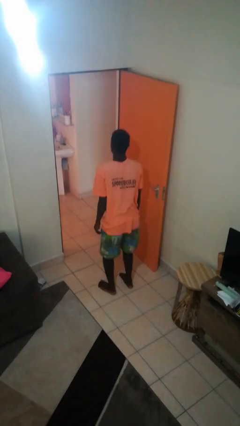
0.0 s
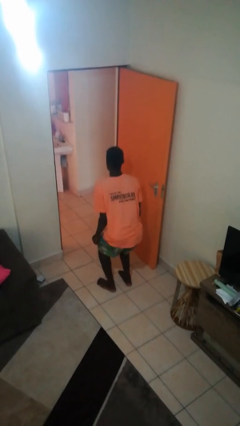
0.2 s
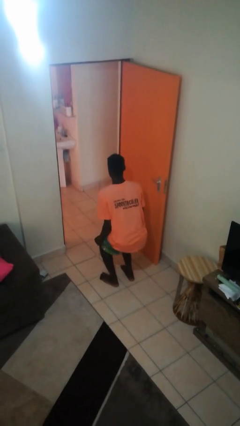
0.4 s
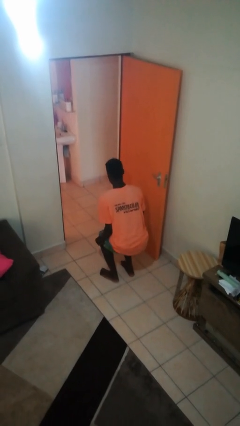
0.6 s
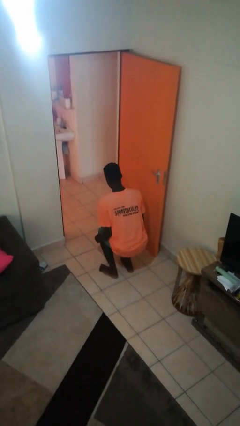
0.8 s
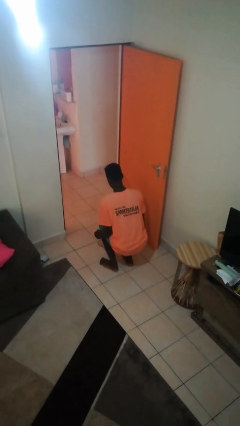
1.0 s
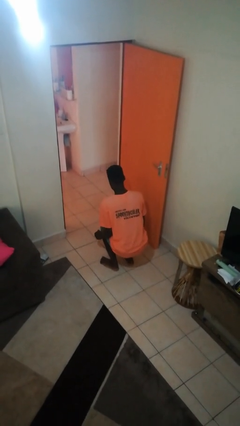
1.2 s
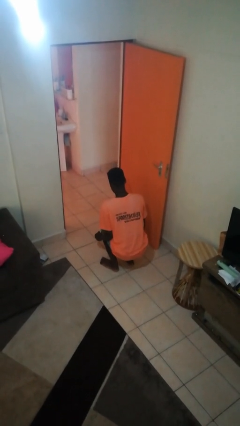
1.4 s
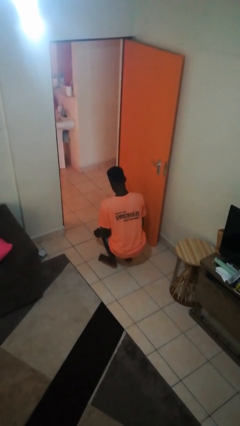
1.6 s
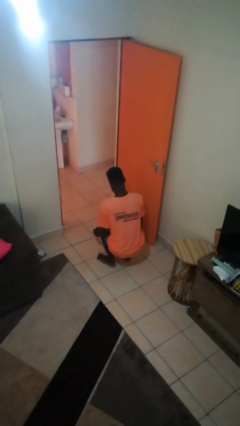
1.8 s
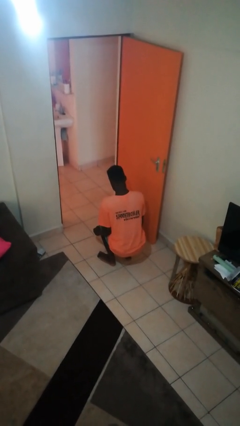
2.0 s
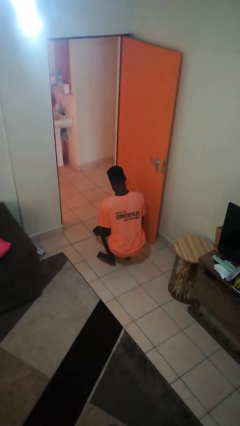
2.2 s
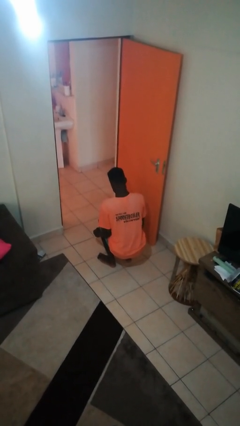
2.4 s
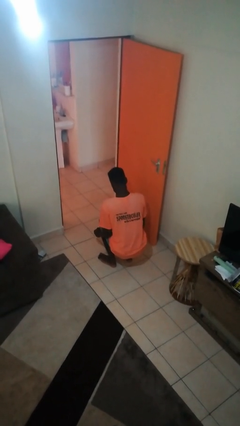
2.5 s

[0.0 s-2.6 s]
person squats

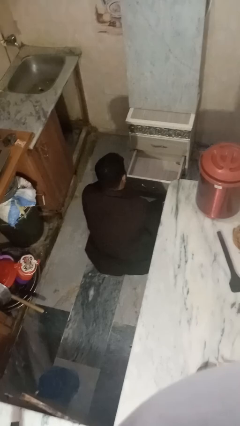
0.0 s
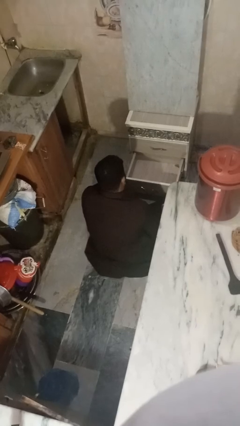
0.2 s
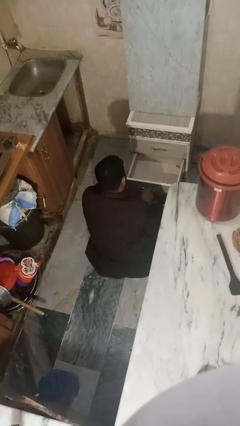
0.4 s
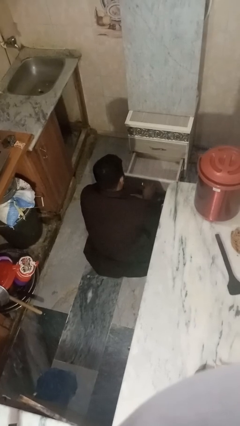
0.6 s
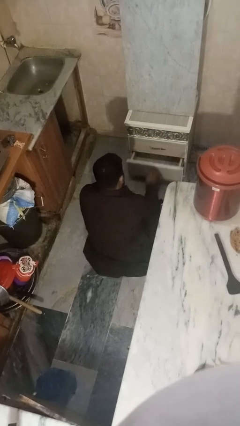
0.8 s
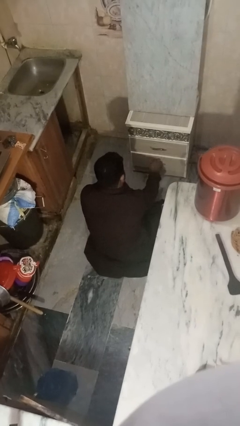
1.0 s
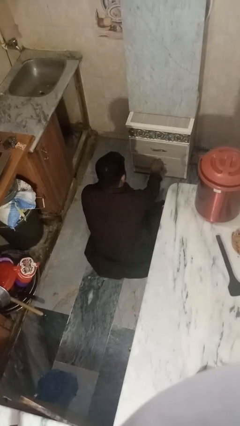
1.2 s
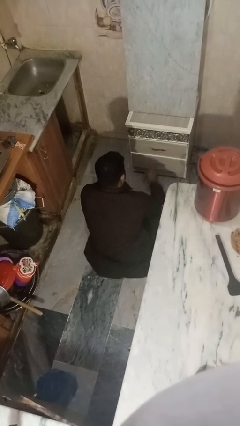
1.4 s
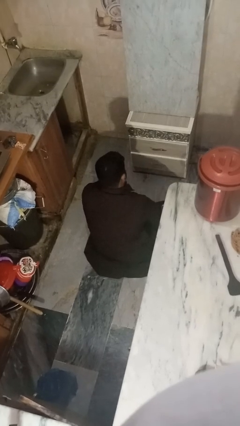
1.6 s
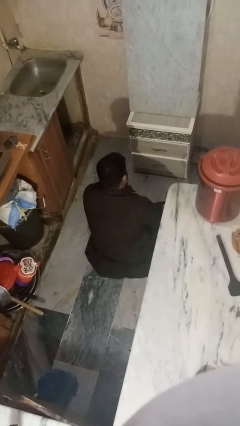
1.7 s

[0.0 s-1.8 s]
person closes kitchen drawer

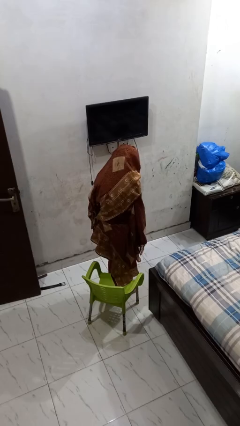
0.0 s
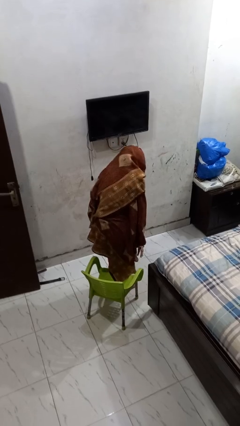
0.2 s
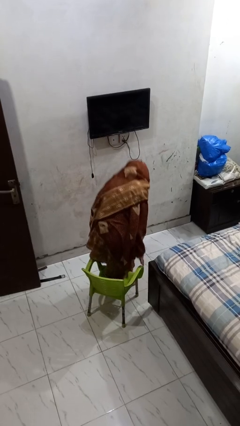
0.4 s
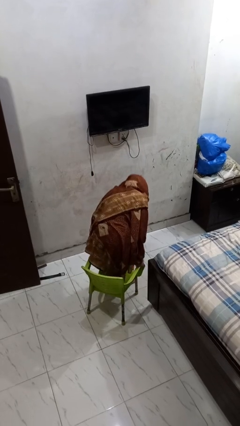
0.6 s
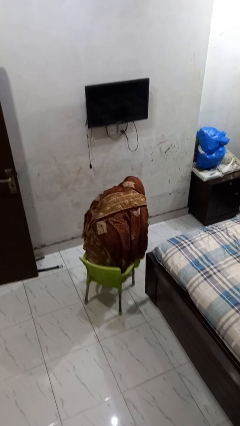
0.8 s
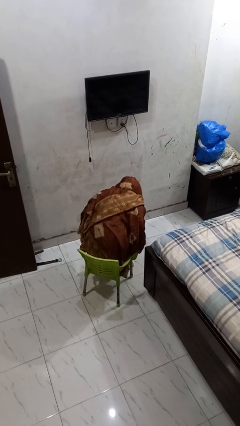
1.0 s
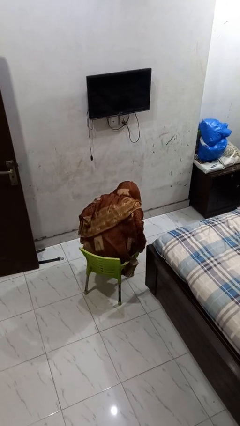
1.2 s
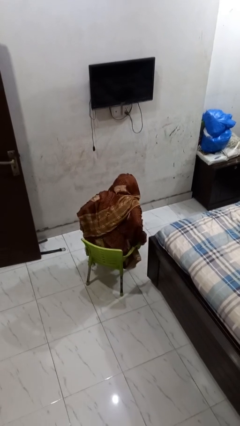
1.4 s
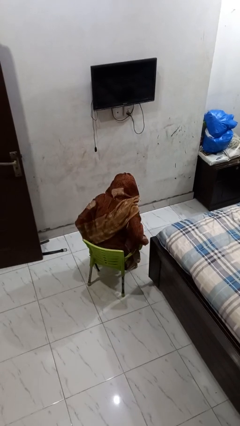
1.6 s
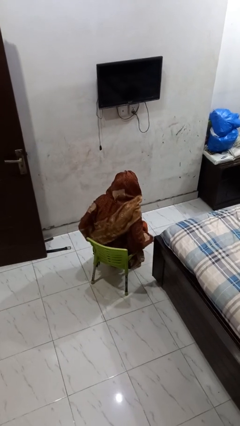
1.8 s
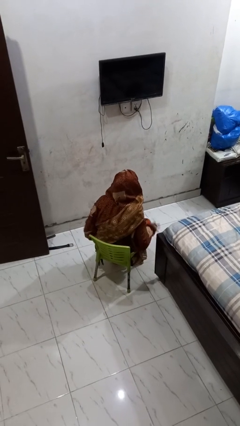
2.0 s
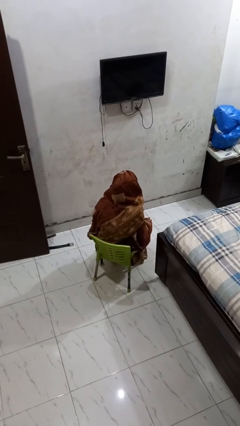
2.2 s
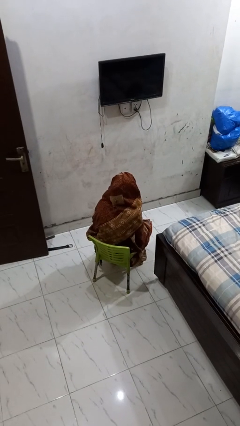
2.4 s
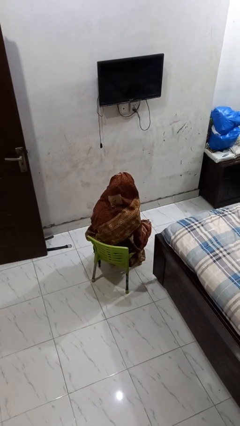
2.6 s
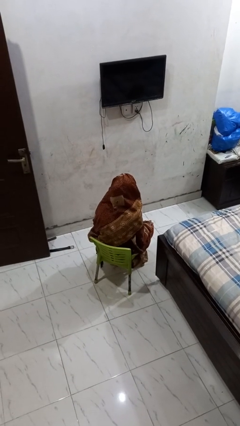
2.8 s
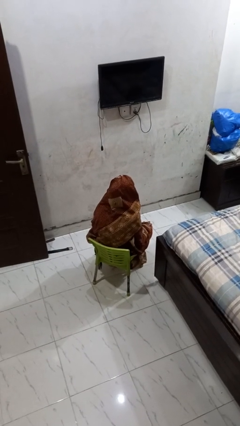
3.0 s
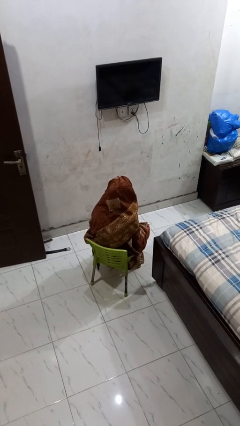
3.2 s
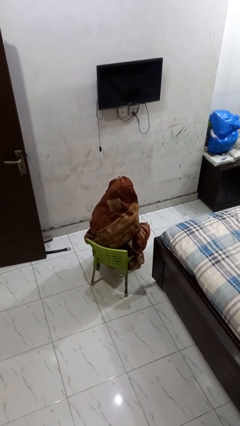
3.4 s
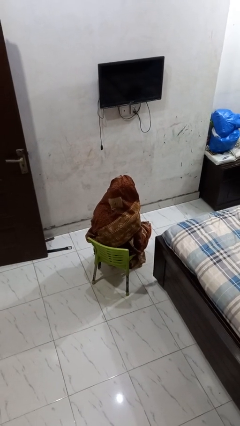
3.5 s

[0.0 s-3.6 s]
person sits down

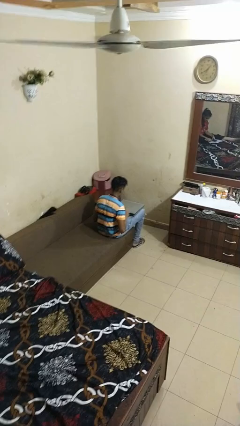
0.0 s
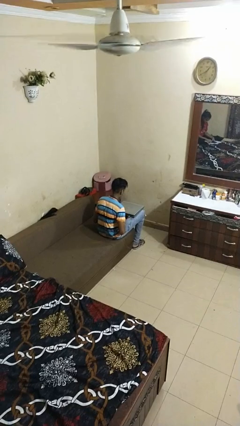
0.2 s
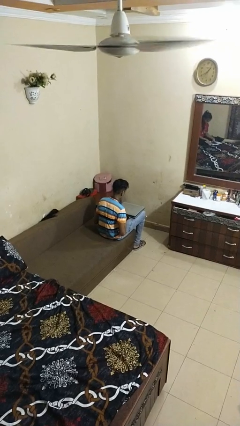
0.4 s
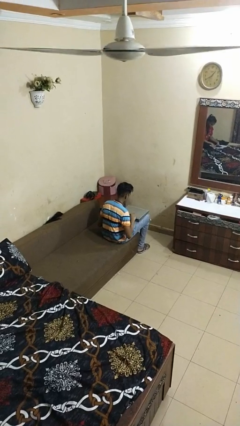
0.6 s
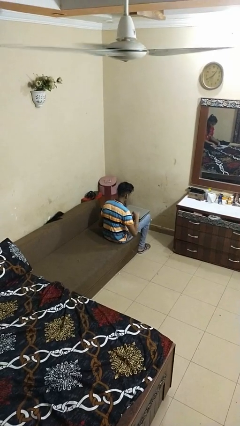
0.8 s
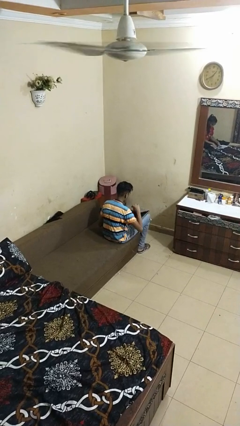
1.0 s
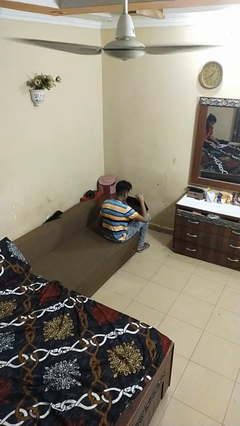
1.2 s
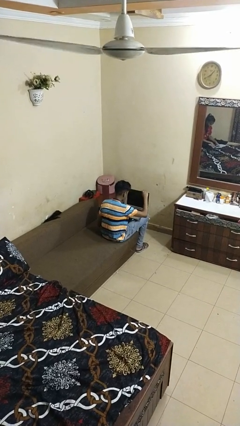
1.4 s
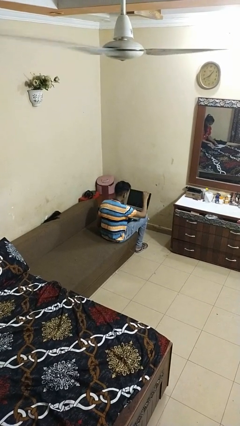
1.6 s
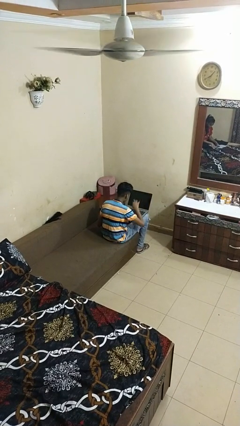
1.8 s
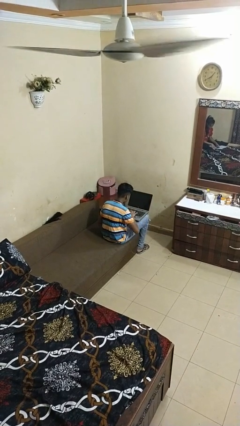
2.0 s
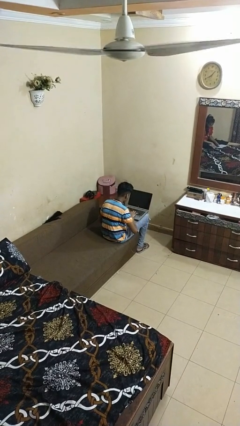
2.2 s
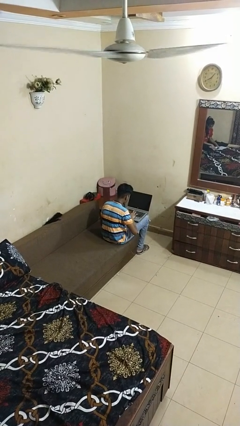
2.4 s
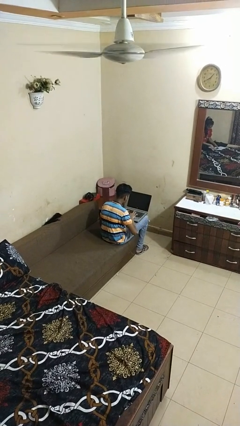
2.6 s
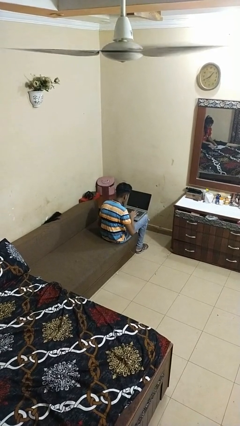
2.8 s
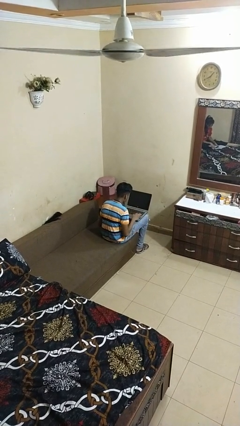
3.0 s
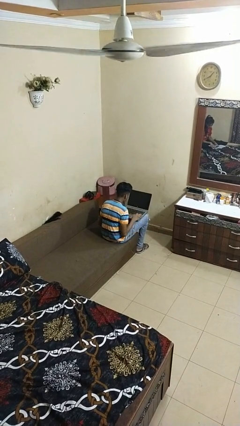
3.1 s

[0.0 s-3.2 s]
person opens laptop

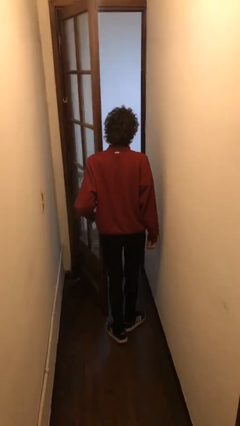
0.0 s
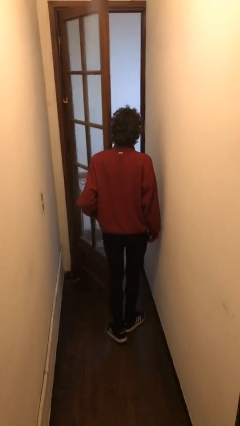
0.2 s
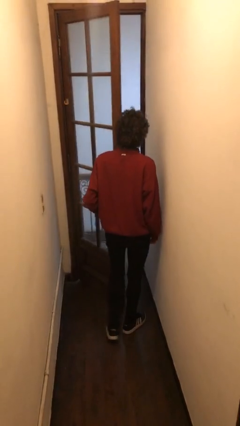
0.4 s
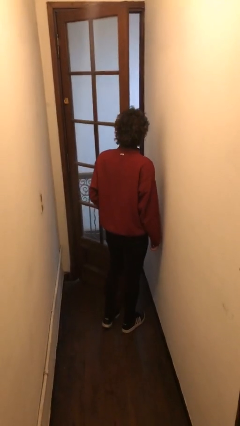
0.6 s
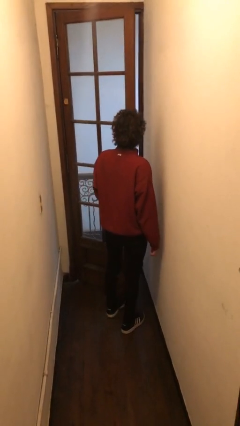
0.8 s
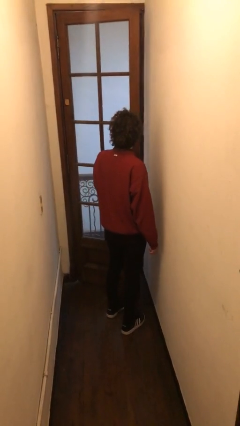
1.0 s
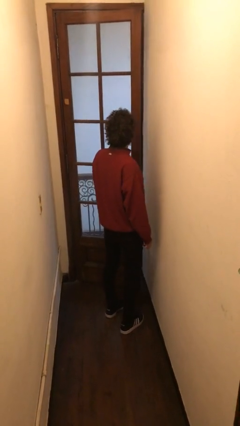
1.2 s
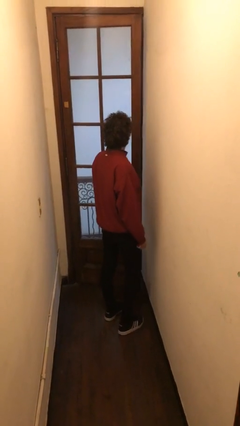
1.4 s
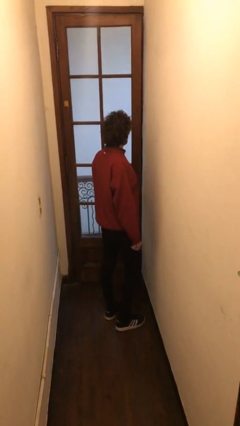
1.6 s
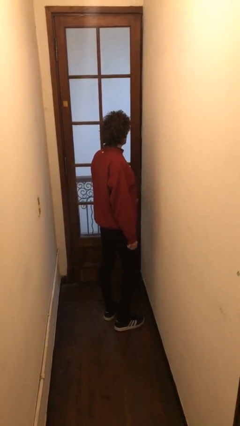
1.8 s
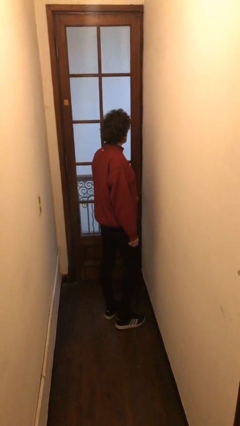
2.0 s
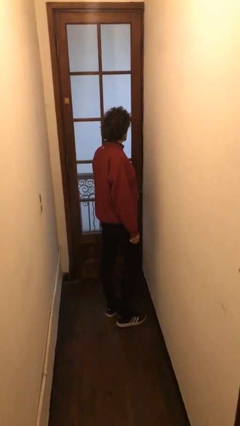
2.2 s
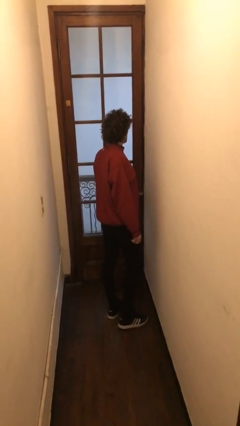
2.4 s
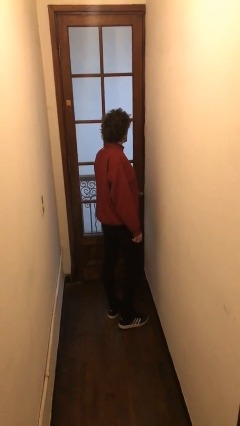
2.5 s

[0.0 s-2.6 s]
person closes facility door

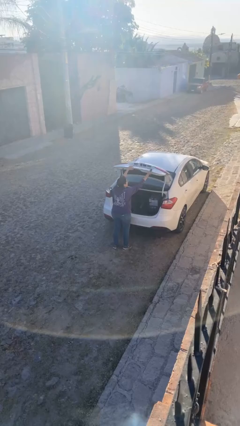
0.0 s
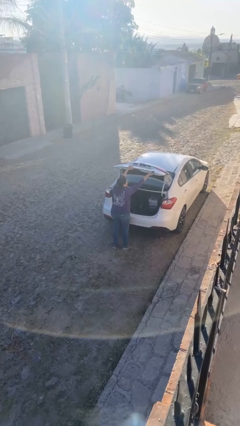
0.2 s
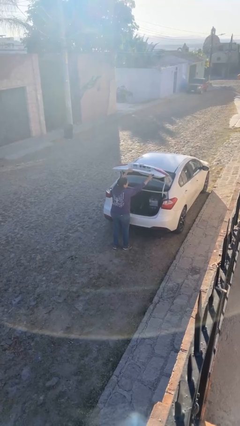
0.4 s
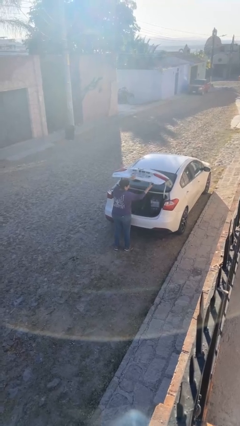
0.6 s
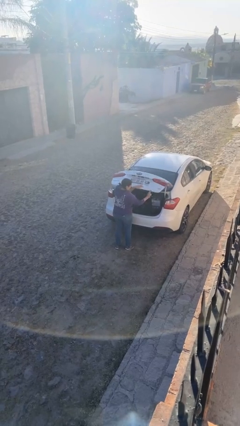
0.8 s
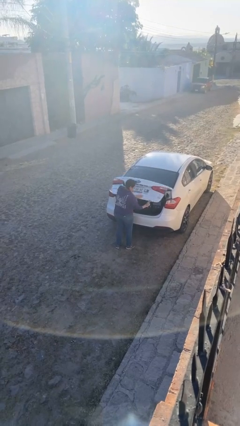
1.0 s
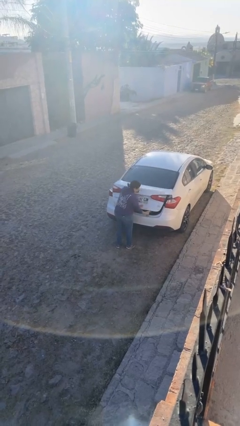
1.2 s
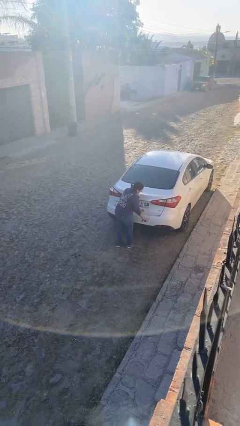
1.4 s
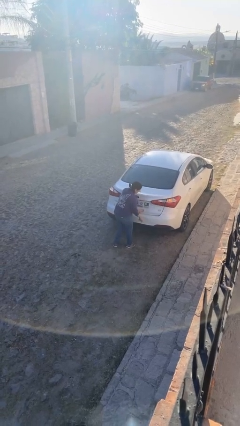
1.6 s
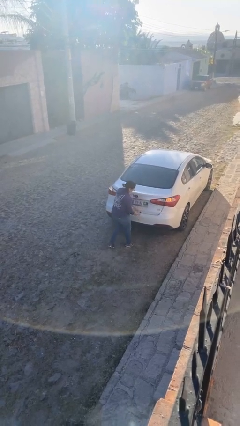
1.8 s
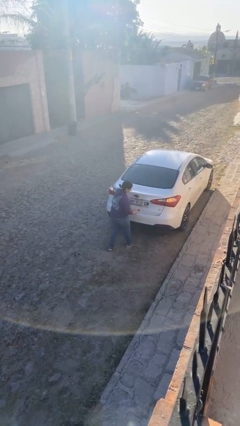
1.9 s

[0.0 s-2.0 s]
person closes car trunk

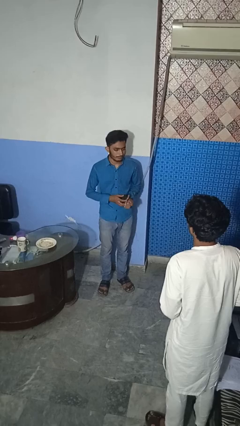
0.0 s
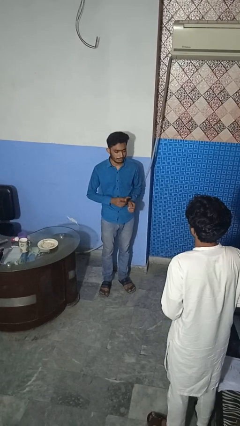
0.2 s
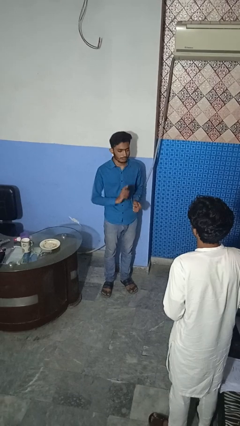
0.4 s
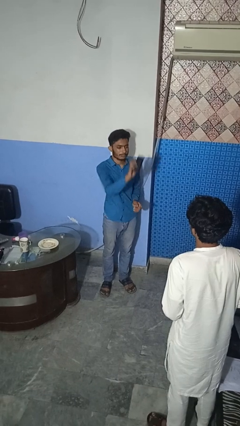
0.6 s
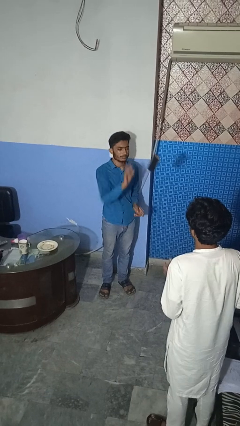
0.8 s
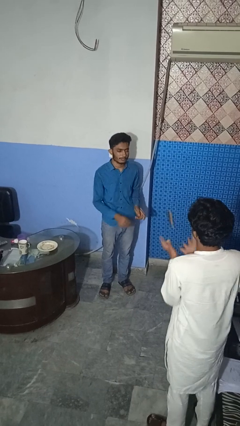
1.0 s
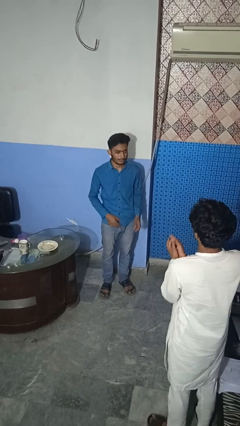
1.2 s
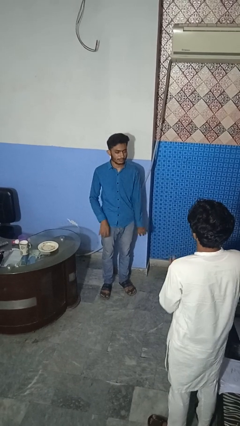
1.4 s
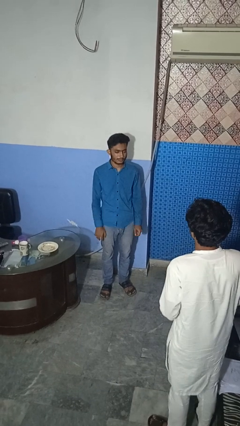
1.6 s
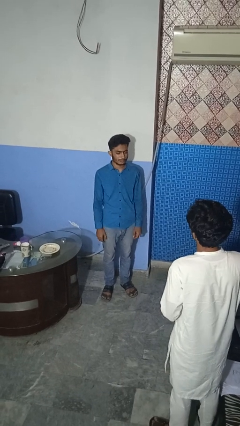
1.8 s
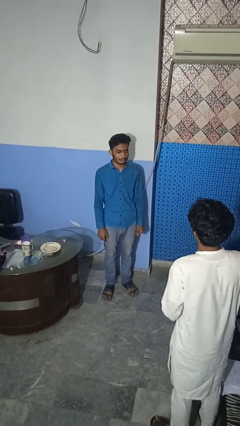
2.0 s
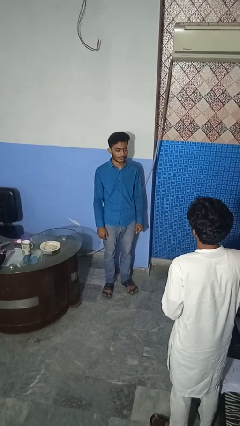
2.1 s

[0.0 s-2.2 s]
person throws object to person
